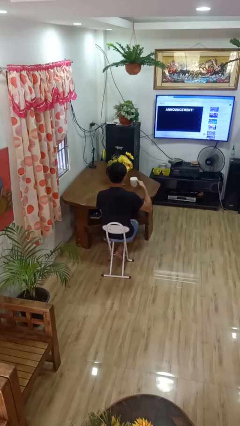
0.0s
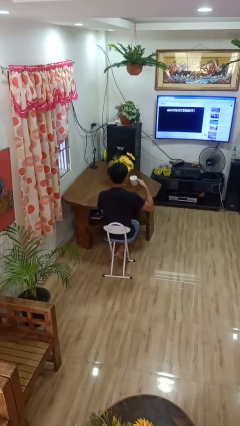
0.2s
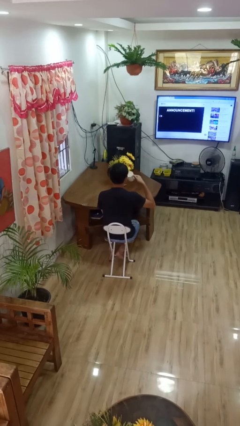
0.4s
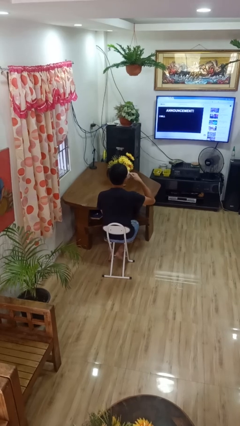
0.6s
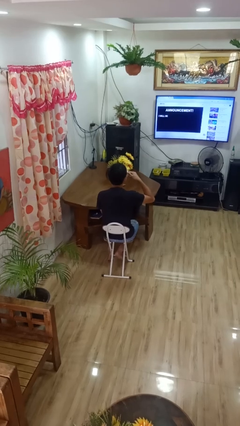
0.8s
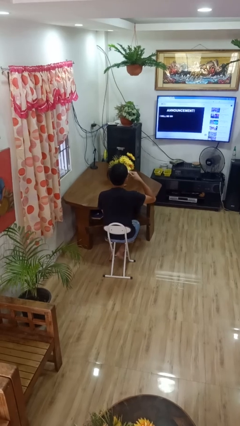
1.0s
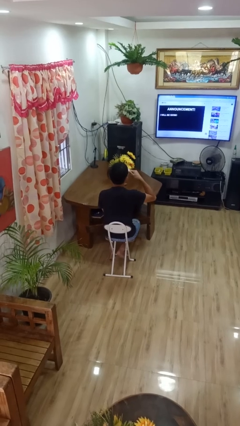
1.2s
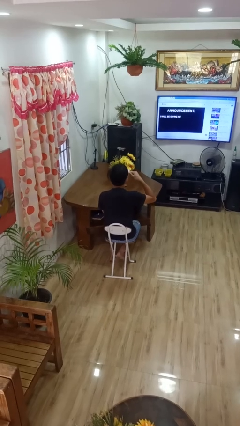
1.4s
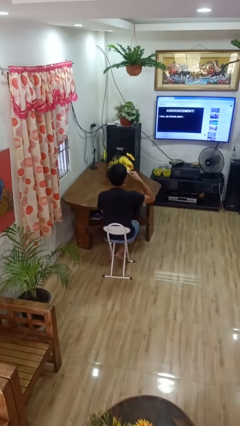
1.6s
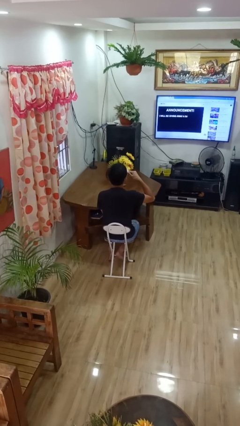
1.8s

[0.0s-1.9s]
person drinks from mug

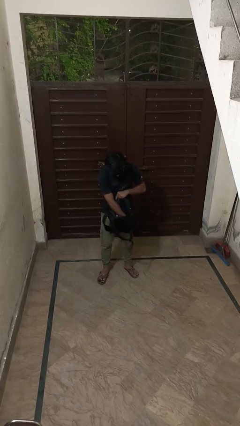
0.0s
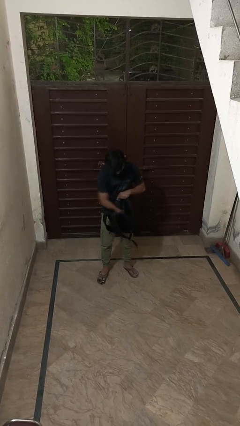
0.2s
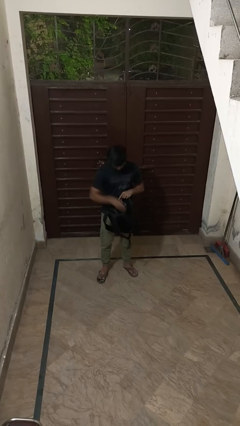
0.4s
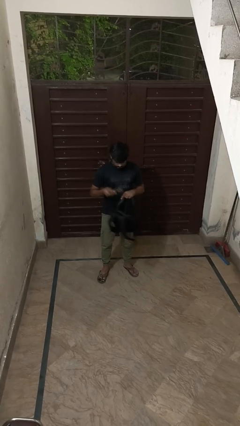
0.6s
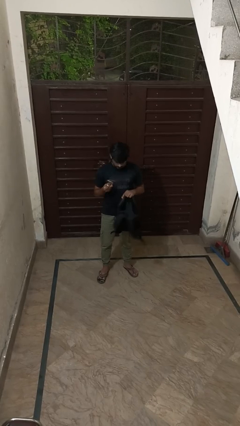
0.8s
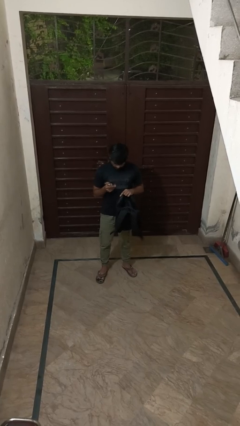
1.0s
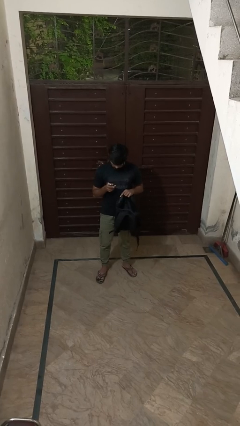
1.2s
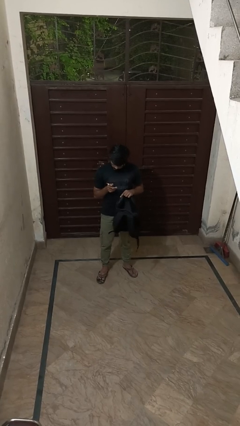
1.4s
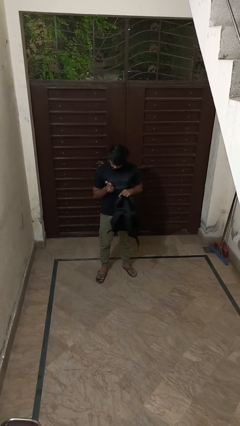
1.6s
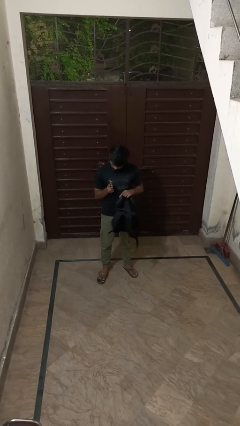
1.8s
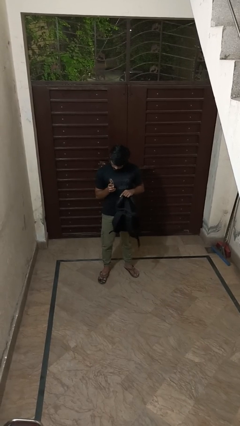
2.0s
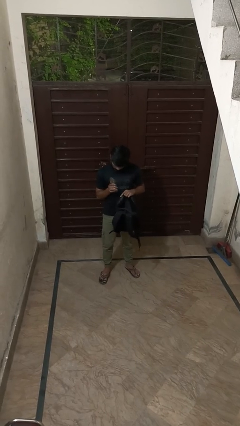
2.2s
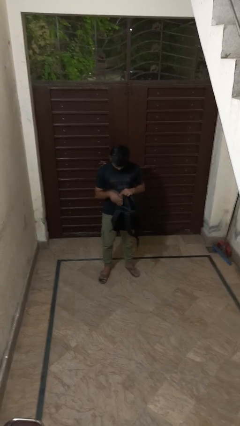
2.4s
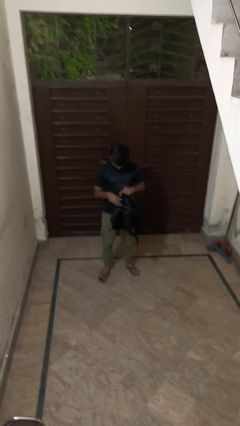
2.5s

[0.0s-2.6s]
person takes object from backpack

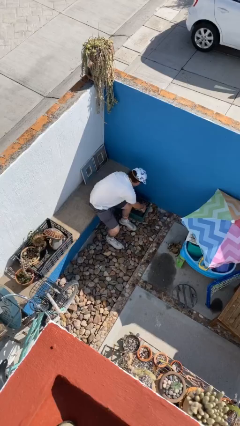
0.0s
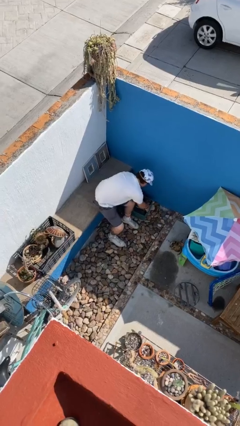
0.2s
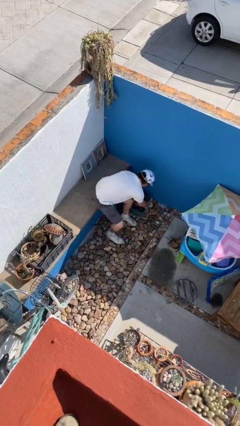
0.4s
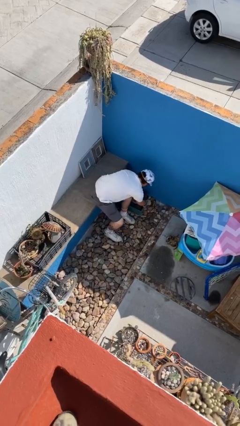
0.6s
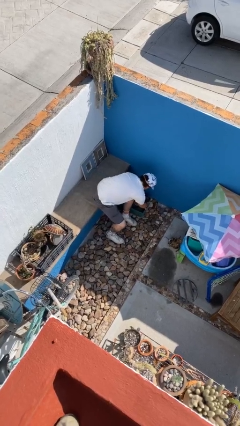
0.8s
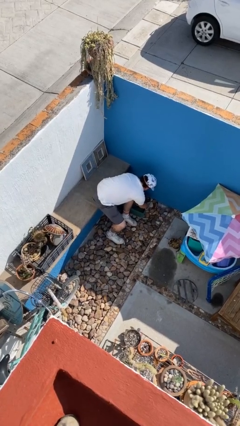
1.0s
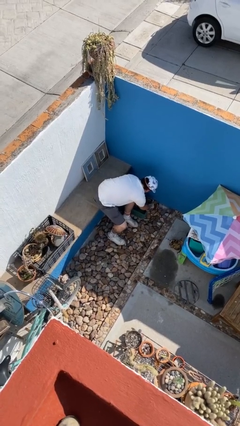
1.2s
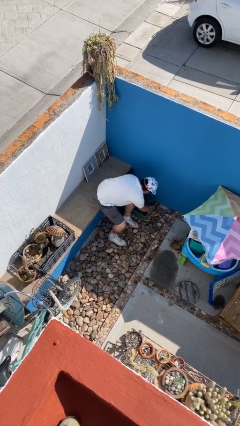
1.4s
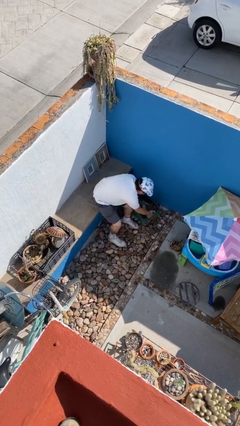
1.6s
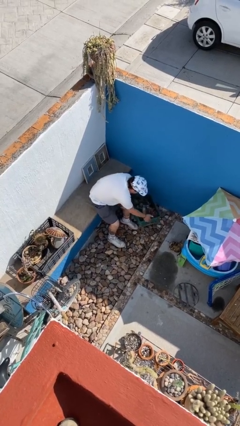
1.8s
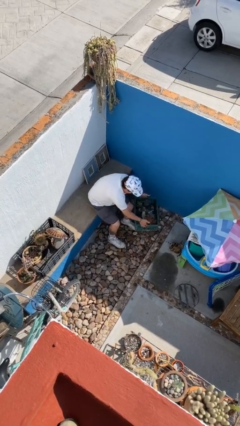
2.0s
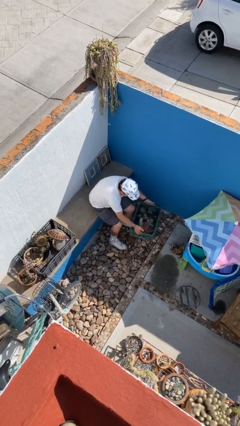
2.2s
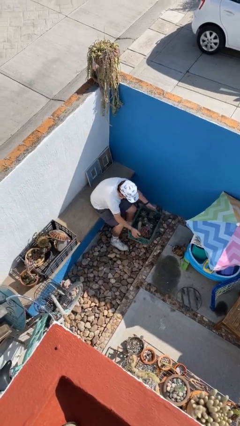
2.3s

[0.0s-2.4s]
person picks up object from floor

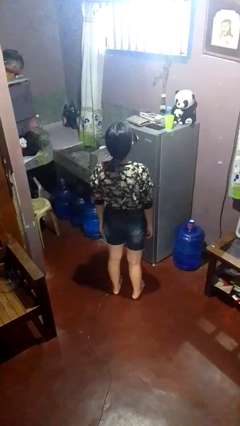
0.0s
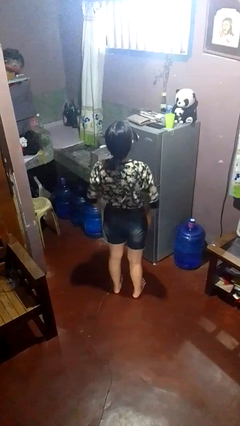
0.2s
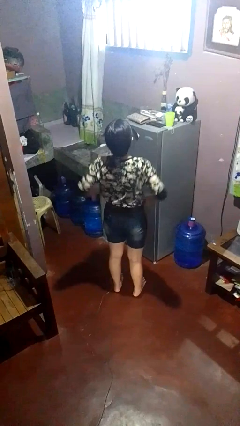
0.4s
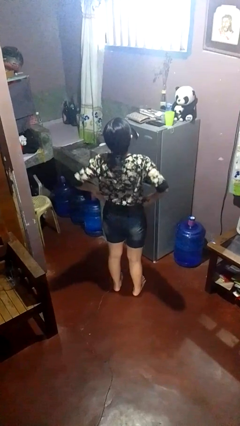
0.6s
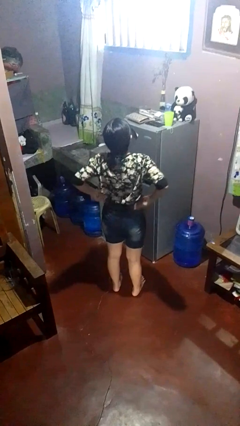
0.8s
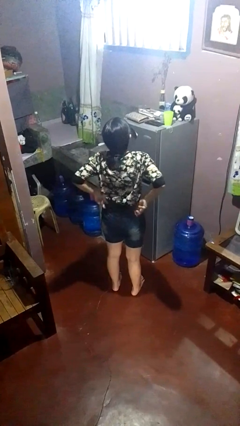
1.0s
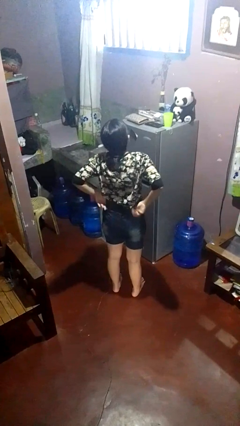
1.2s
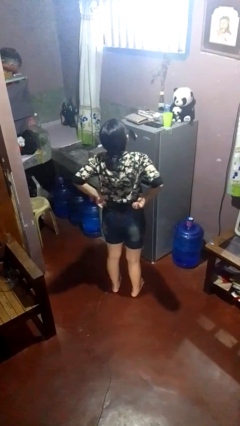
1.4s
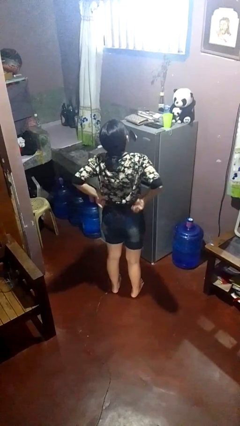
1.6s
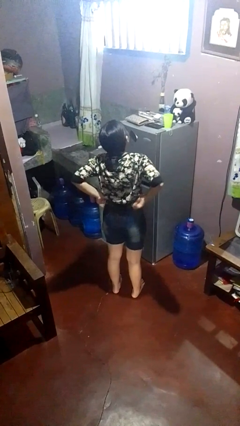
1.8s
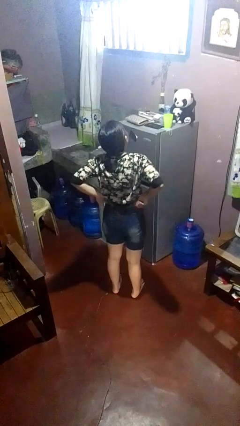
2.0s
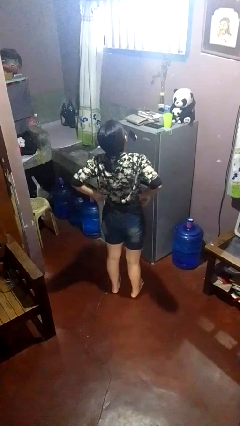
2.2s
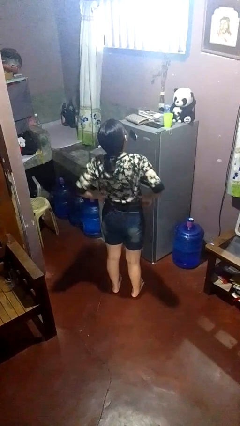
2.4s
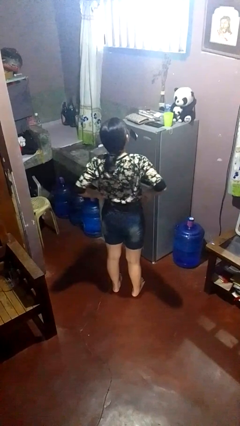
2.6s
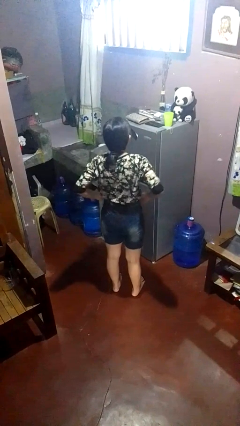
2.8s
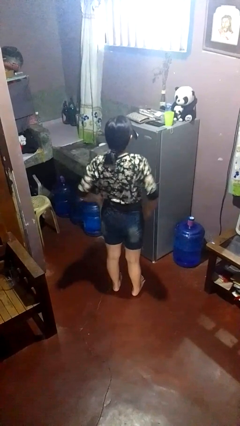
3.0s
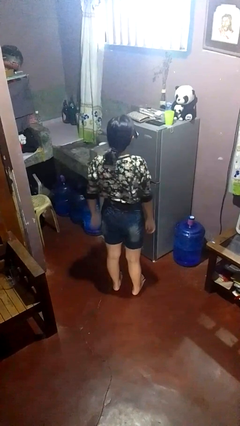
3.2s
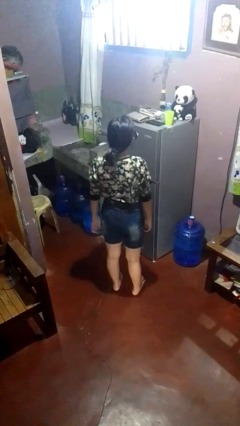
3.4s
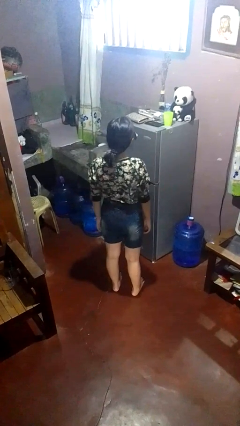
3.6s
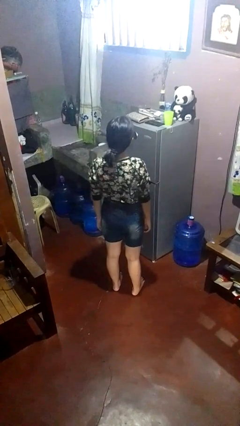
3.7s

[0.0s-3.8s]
person hikes up pants

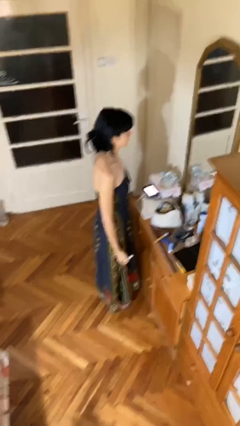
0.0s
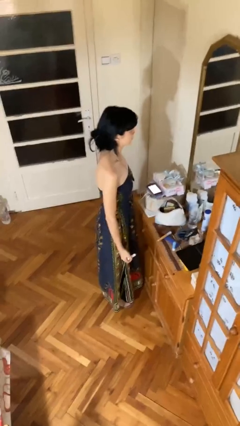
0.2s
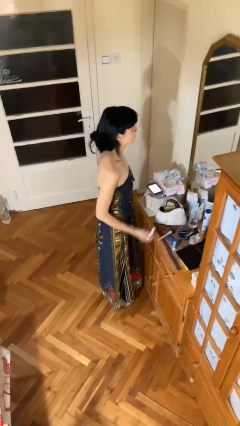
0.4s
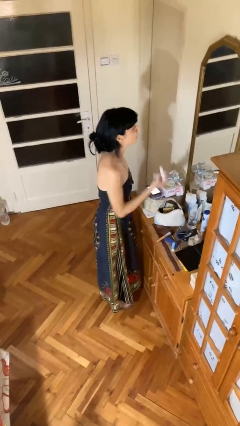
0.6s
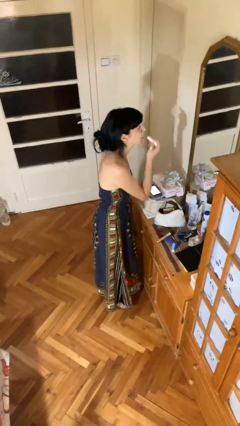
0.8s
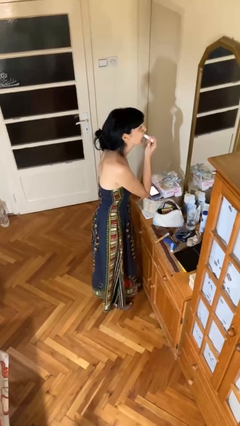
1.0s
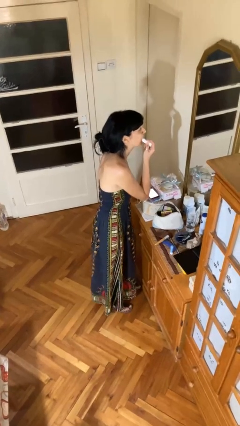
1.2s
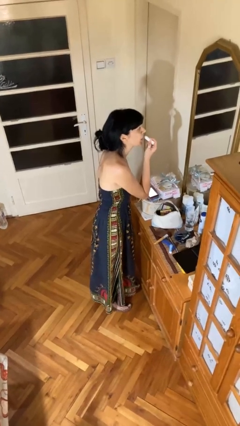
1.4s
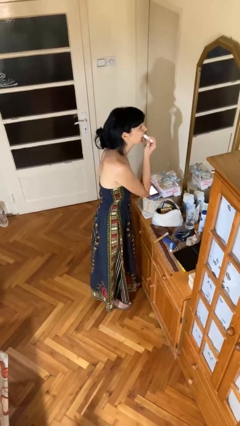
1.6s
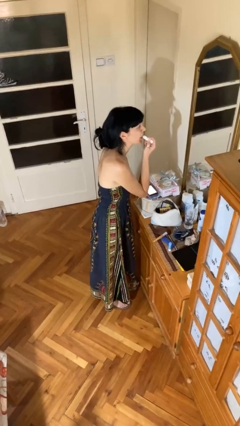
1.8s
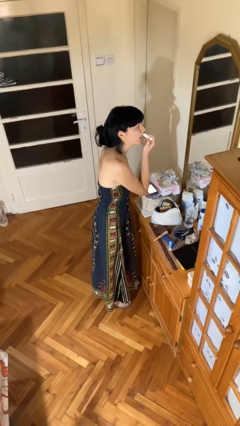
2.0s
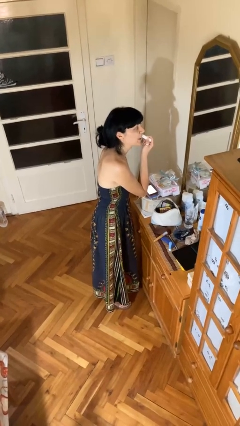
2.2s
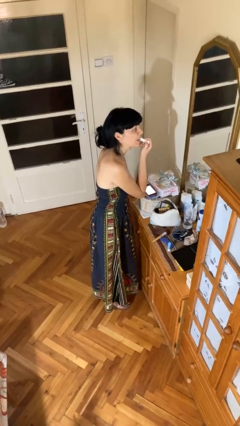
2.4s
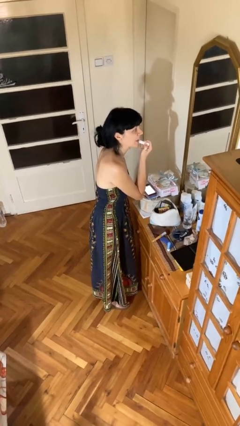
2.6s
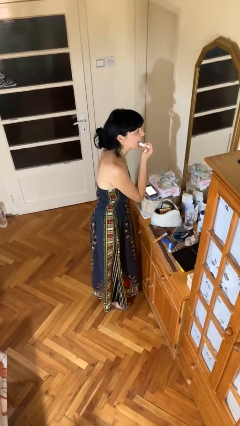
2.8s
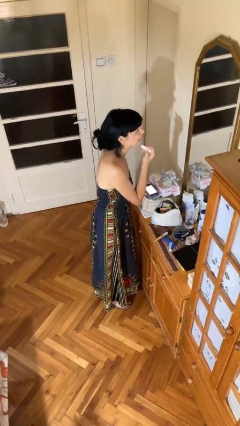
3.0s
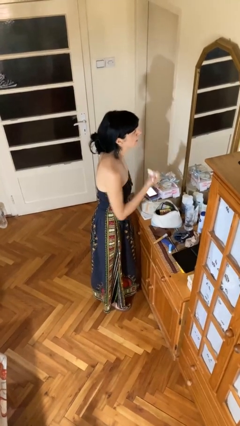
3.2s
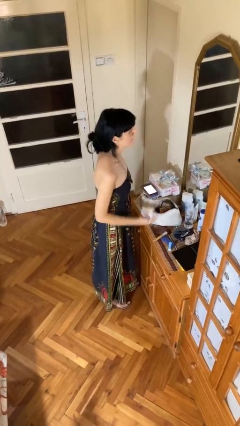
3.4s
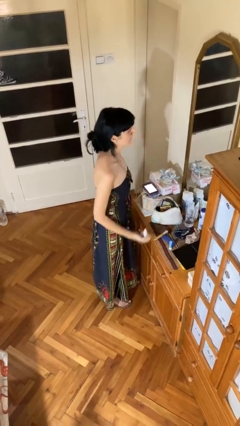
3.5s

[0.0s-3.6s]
person applies lip makeup

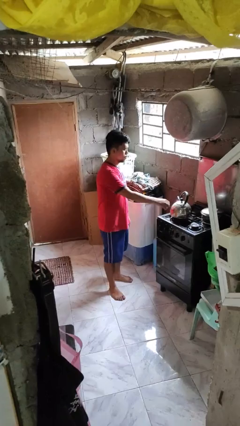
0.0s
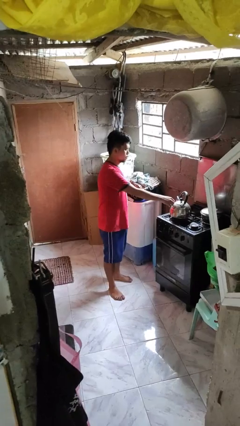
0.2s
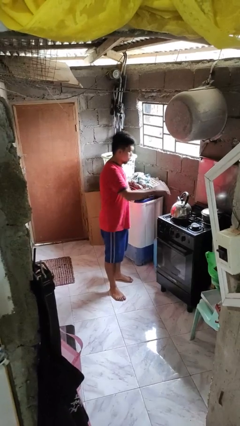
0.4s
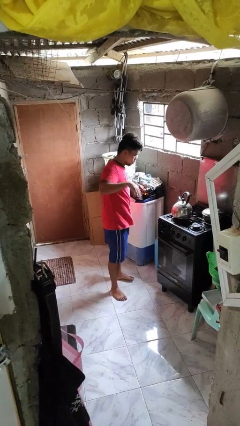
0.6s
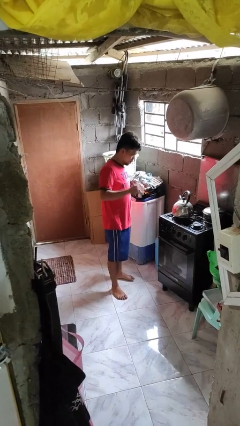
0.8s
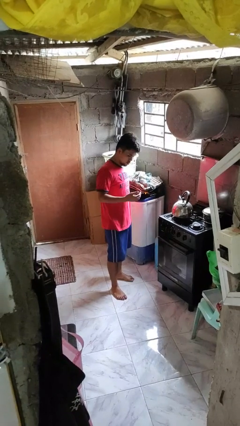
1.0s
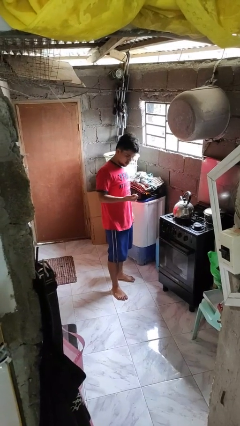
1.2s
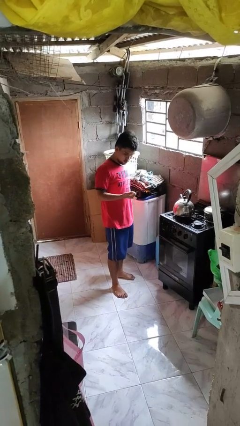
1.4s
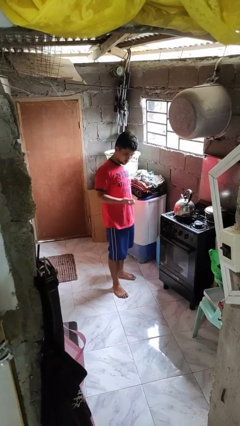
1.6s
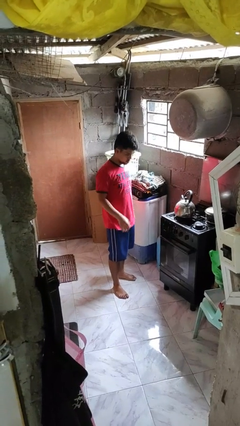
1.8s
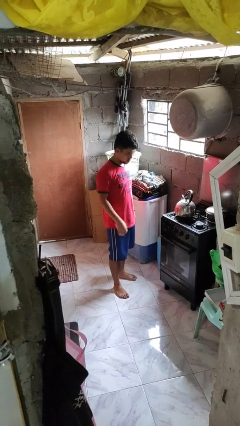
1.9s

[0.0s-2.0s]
person burns hand

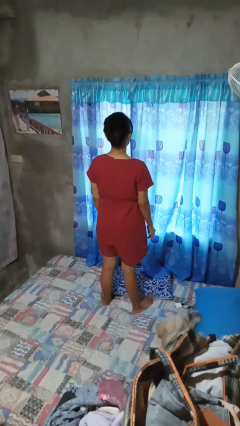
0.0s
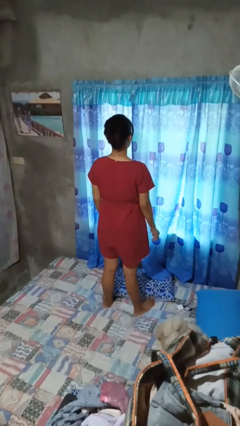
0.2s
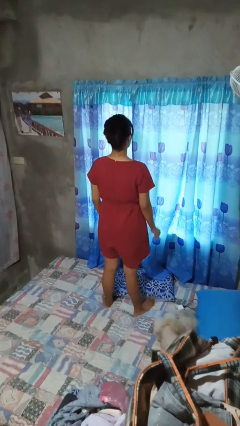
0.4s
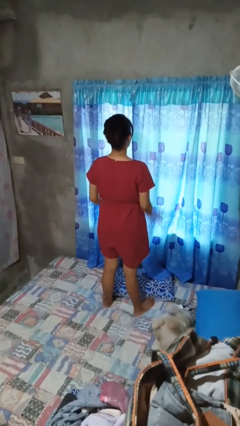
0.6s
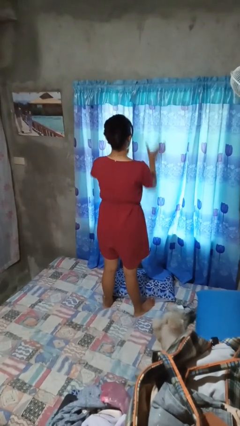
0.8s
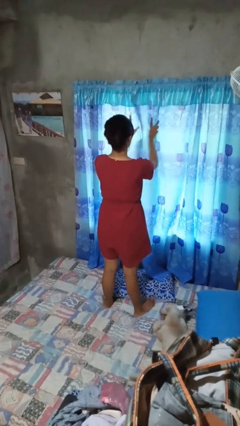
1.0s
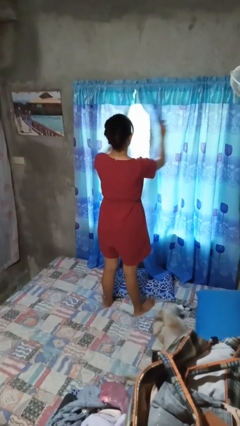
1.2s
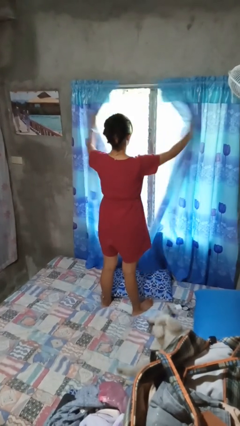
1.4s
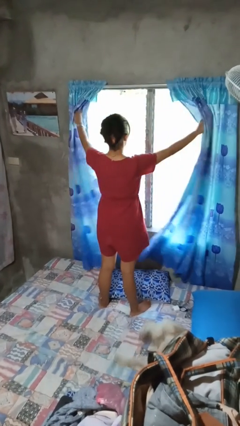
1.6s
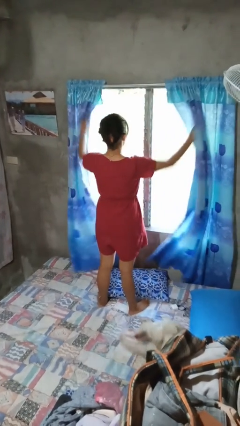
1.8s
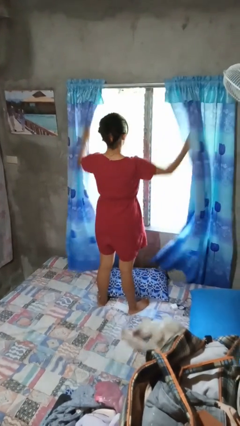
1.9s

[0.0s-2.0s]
person opens curtains
